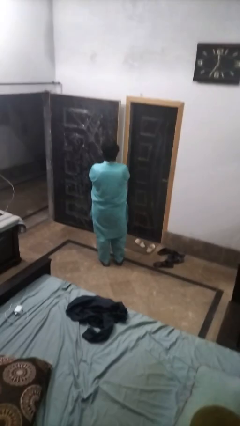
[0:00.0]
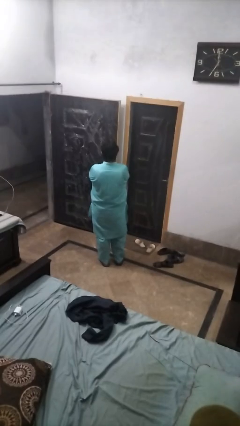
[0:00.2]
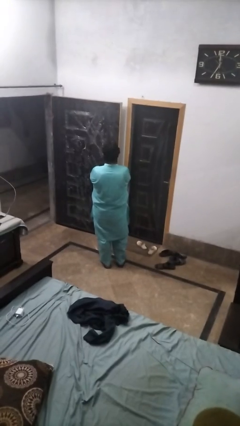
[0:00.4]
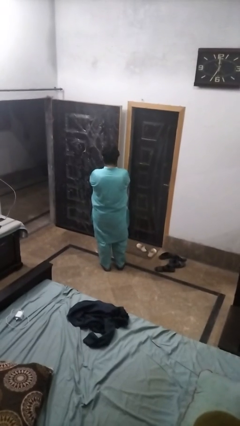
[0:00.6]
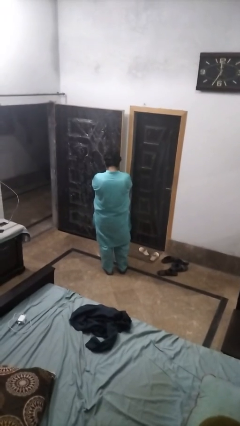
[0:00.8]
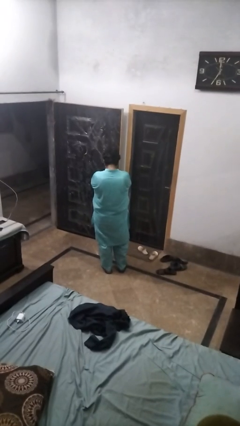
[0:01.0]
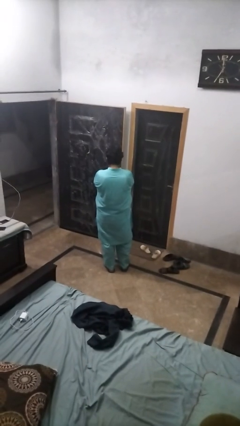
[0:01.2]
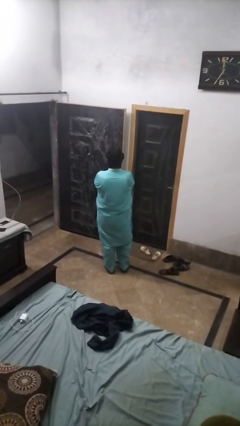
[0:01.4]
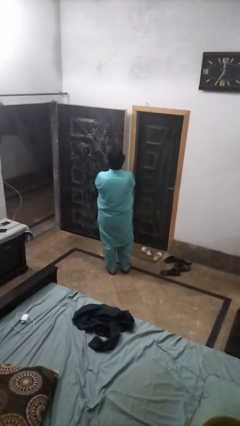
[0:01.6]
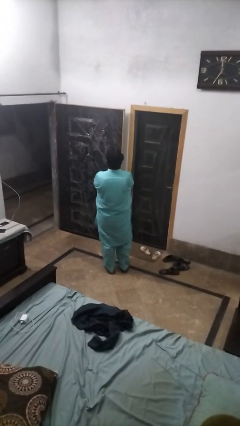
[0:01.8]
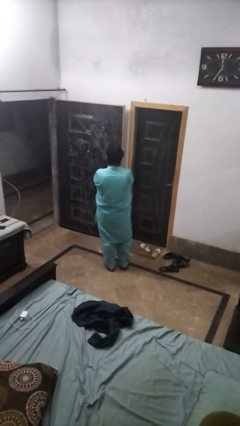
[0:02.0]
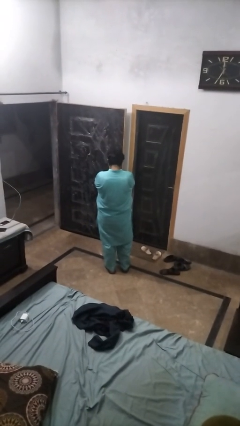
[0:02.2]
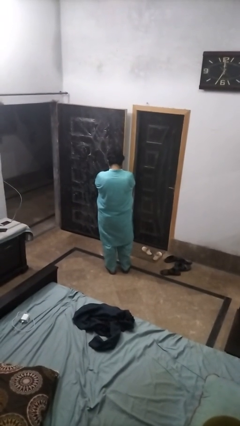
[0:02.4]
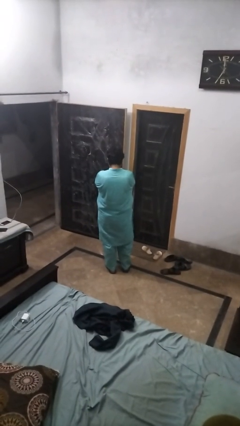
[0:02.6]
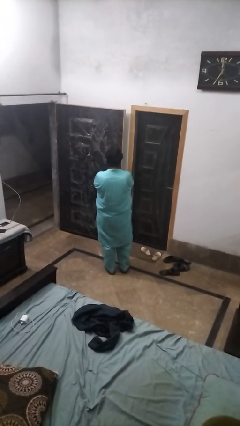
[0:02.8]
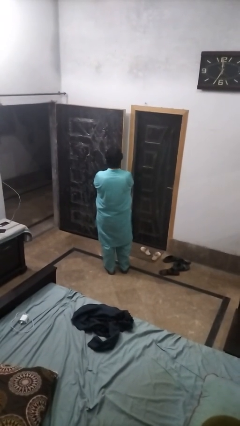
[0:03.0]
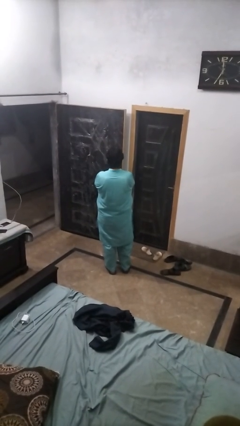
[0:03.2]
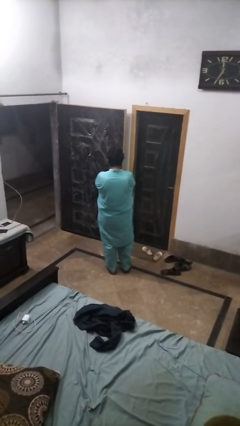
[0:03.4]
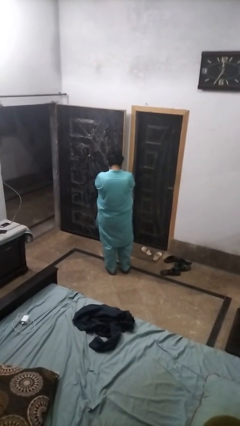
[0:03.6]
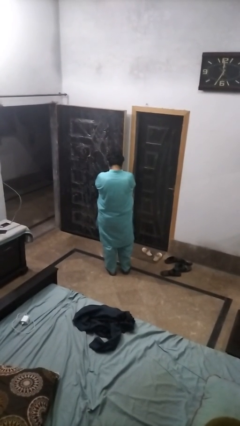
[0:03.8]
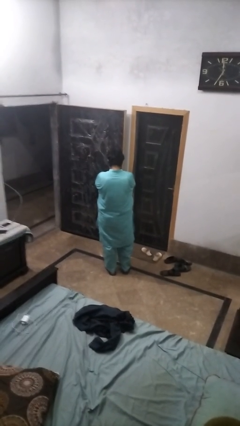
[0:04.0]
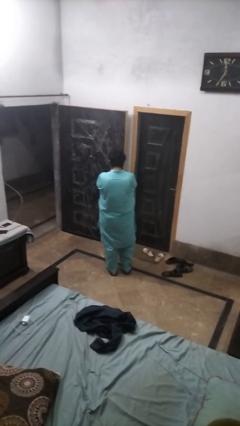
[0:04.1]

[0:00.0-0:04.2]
person nods head

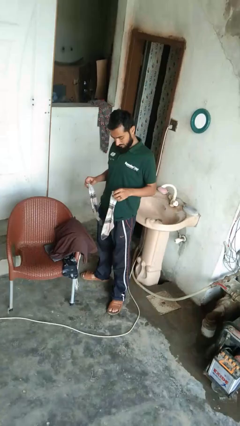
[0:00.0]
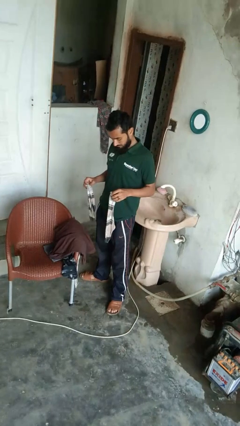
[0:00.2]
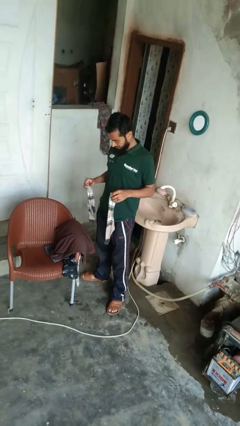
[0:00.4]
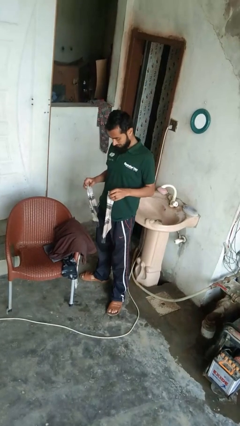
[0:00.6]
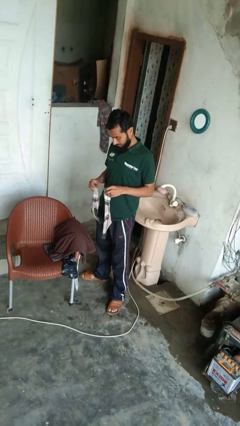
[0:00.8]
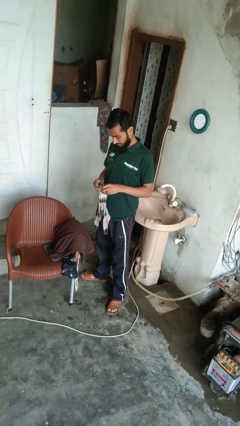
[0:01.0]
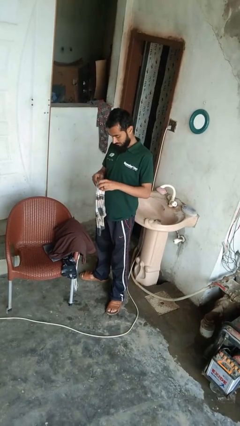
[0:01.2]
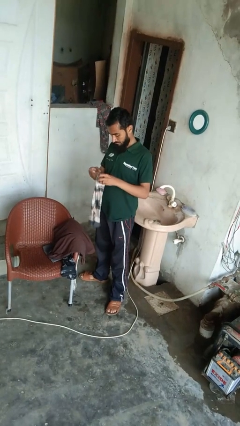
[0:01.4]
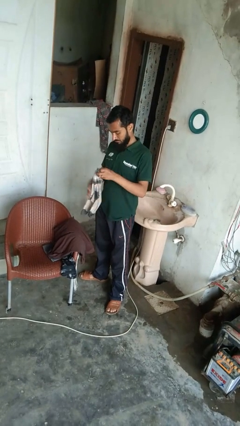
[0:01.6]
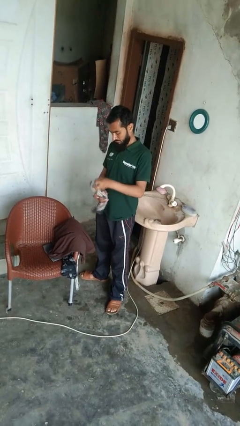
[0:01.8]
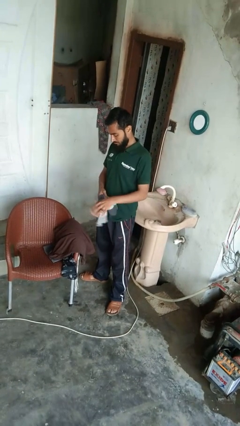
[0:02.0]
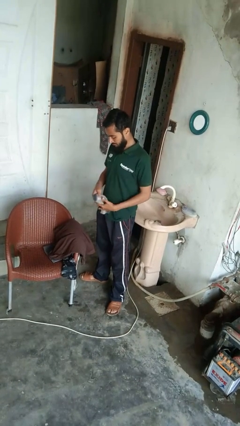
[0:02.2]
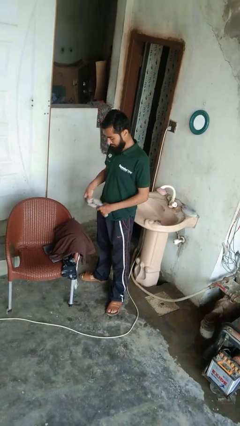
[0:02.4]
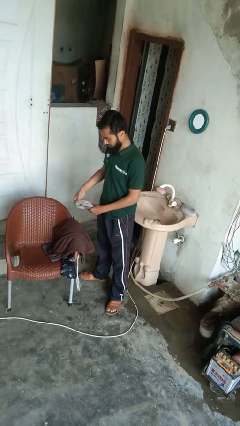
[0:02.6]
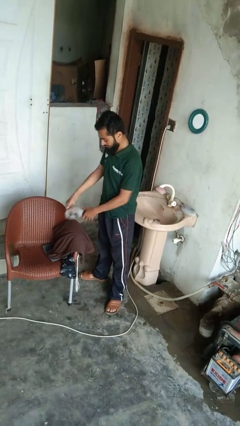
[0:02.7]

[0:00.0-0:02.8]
person folds socks

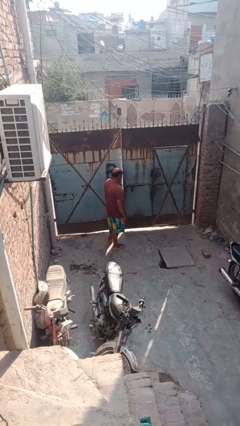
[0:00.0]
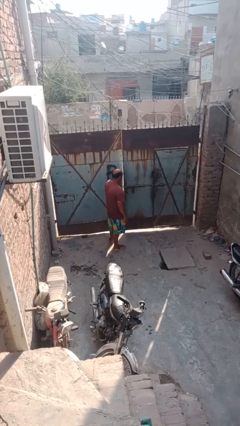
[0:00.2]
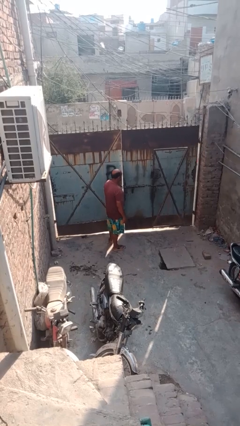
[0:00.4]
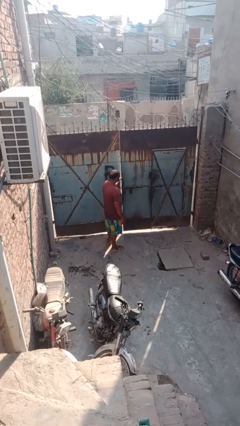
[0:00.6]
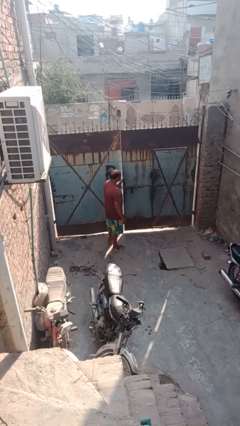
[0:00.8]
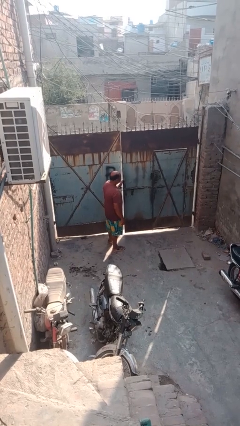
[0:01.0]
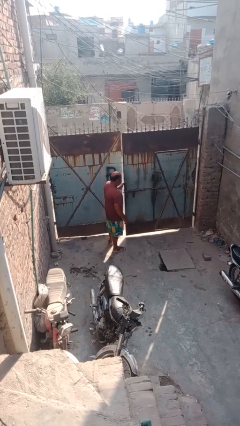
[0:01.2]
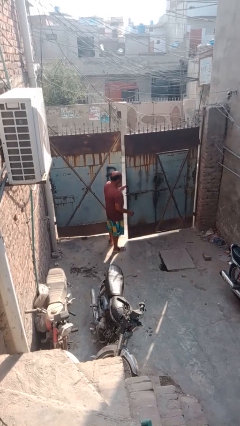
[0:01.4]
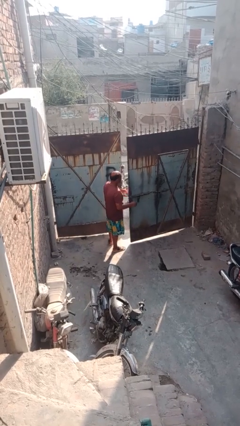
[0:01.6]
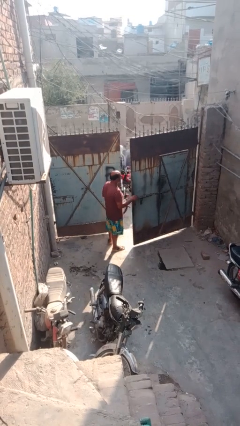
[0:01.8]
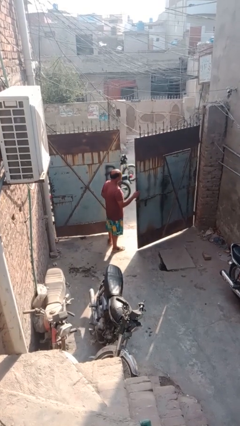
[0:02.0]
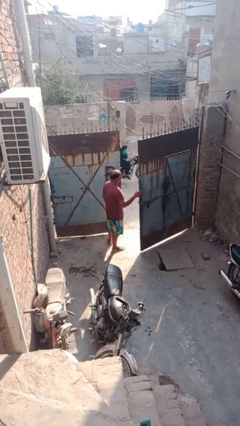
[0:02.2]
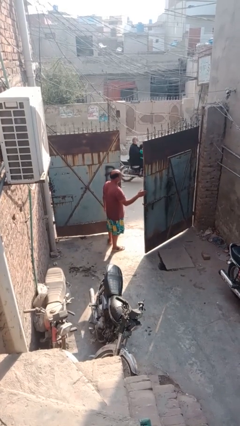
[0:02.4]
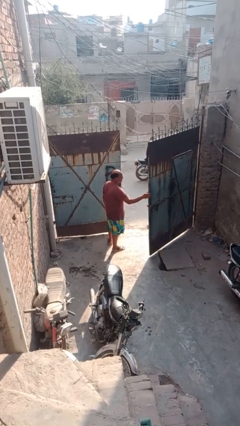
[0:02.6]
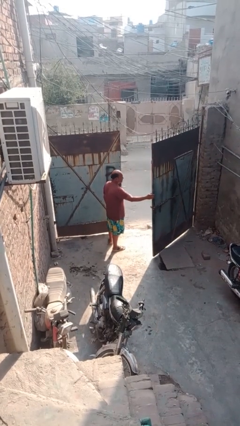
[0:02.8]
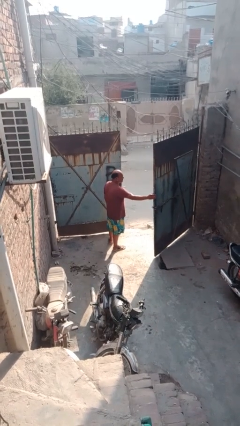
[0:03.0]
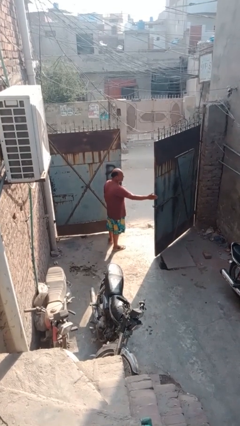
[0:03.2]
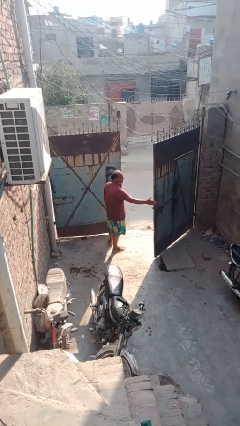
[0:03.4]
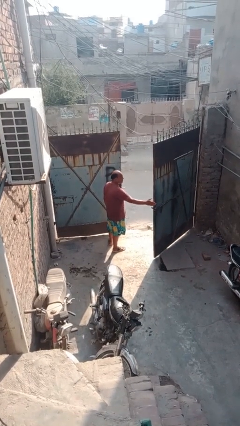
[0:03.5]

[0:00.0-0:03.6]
person opens gate

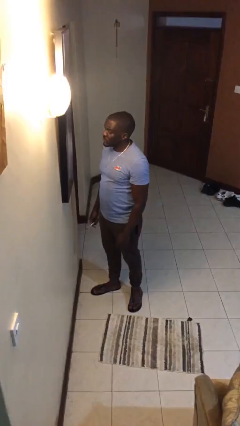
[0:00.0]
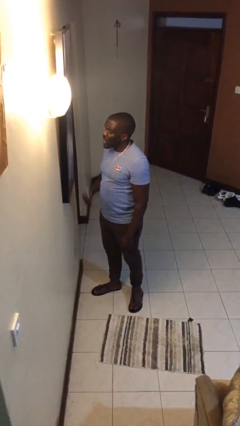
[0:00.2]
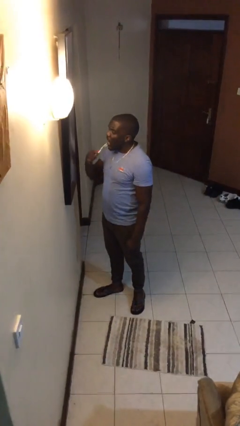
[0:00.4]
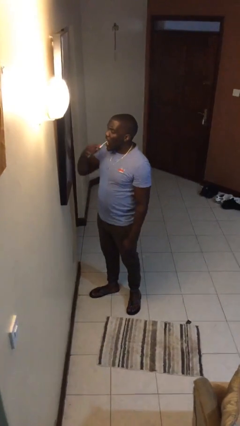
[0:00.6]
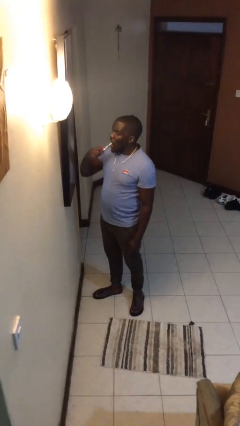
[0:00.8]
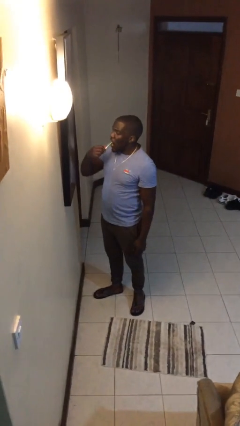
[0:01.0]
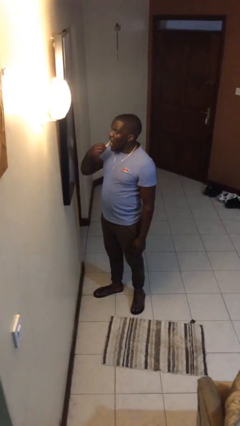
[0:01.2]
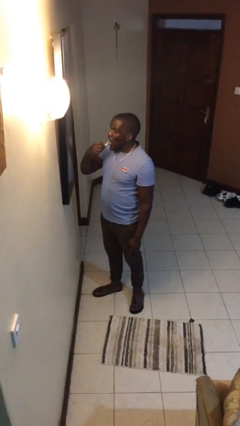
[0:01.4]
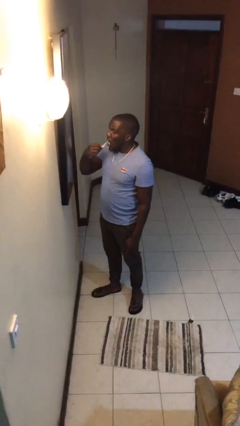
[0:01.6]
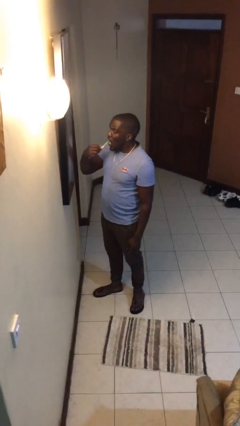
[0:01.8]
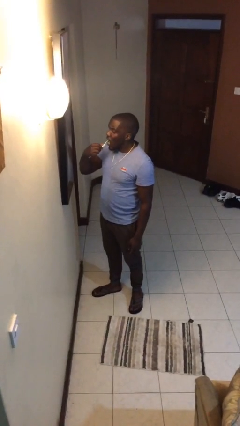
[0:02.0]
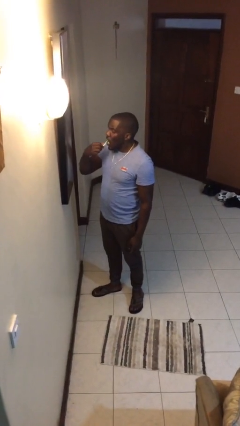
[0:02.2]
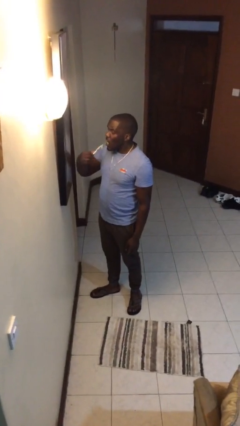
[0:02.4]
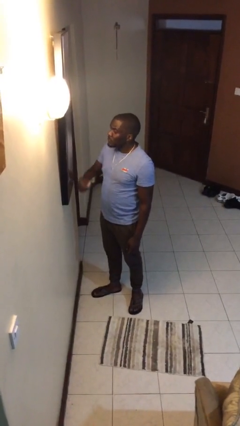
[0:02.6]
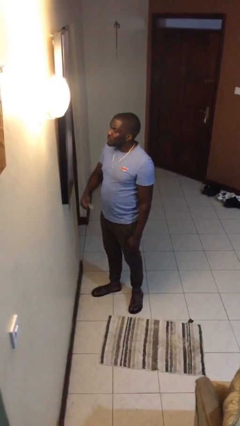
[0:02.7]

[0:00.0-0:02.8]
person brushes teeth

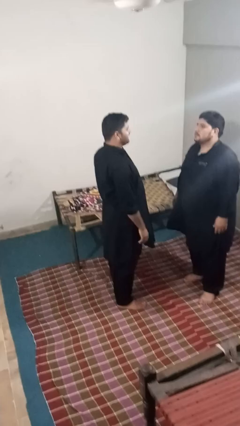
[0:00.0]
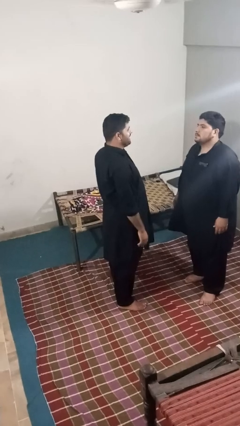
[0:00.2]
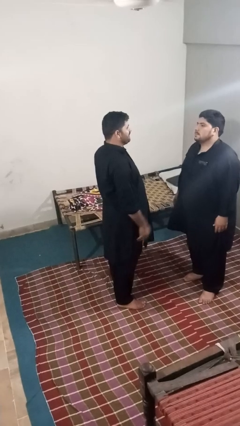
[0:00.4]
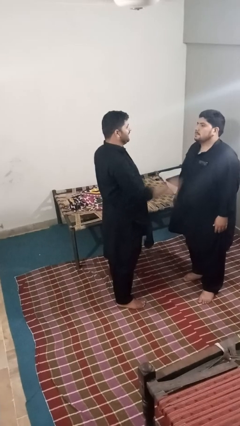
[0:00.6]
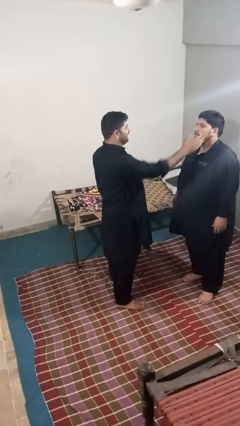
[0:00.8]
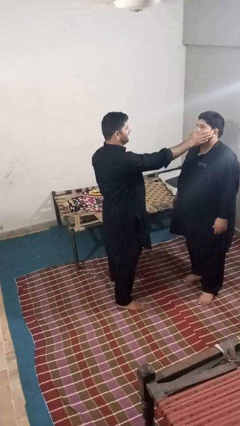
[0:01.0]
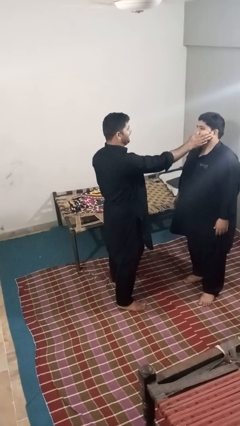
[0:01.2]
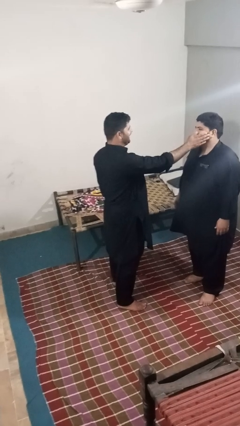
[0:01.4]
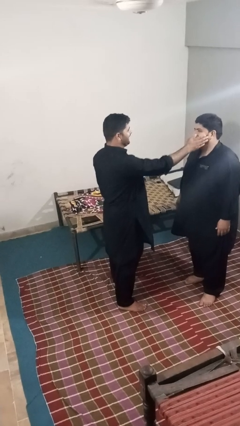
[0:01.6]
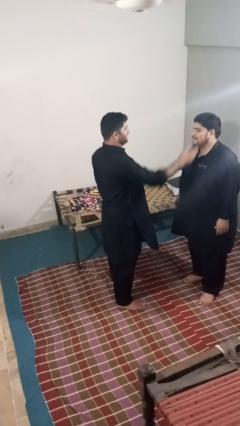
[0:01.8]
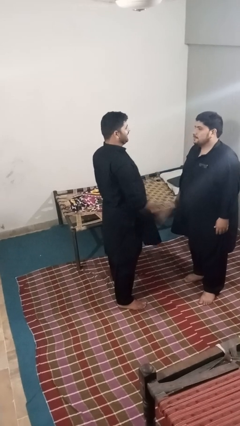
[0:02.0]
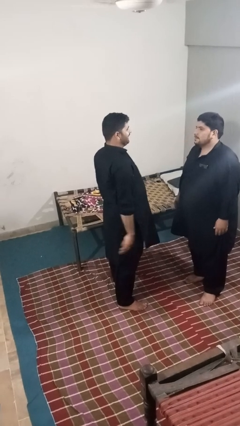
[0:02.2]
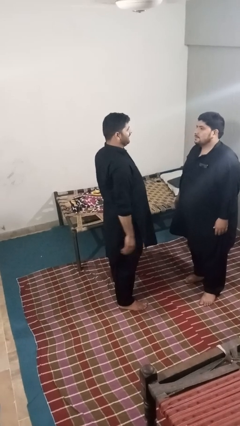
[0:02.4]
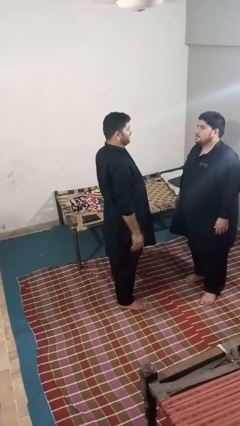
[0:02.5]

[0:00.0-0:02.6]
person touches face of person

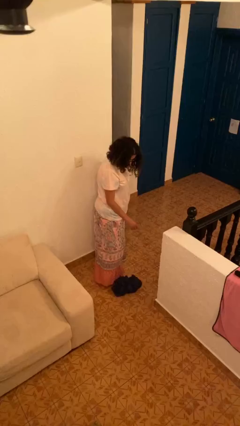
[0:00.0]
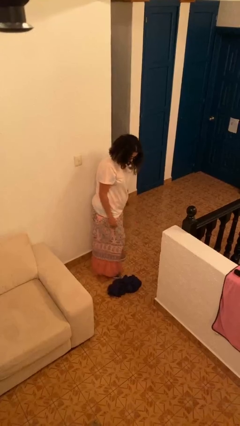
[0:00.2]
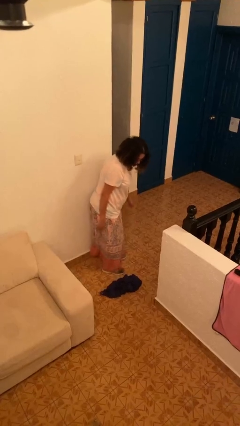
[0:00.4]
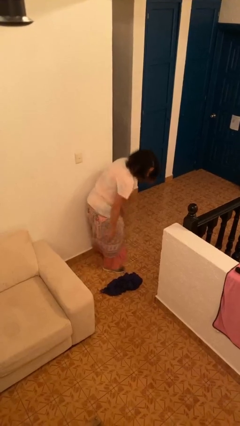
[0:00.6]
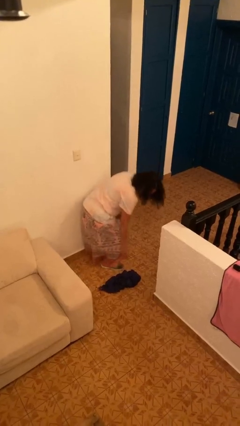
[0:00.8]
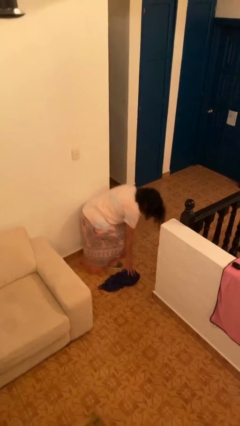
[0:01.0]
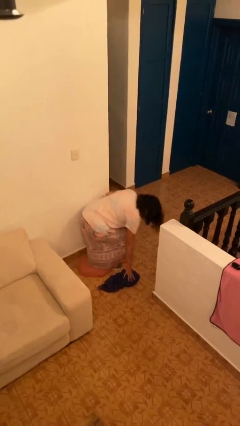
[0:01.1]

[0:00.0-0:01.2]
person drops object

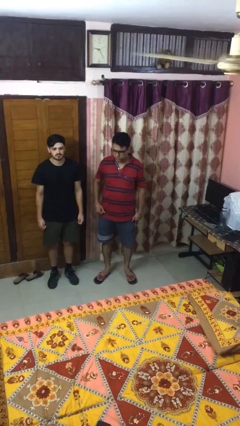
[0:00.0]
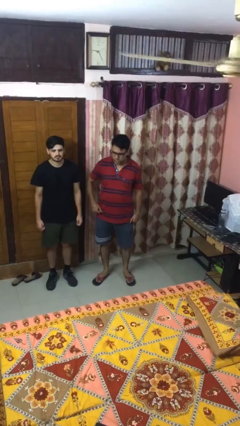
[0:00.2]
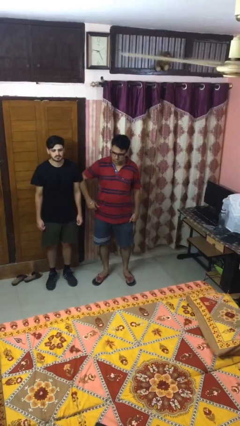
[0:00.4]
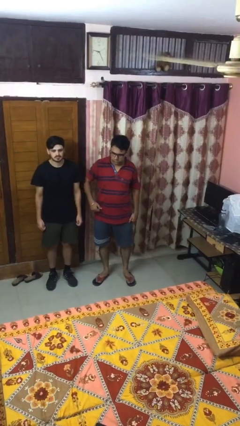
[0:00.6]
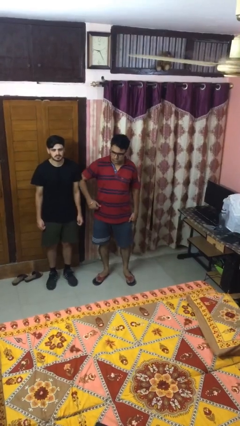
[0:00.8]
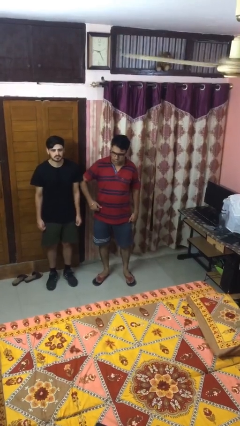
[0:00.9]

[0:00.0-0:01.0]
person nudges person with elbow
